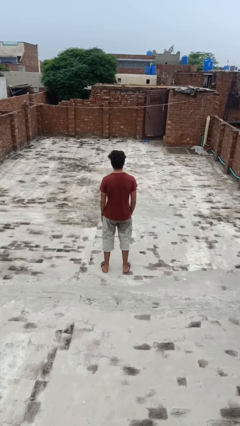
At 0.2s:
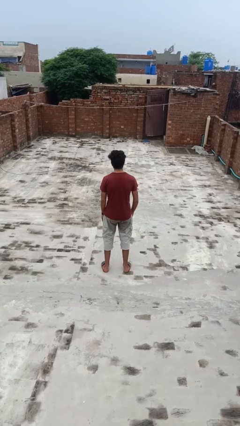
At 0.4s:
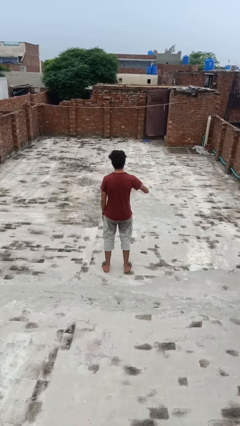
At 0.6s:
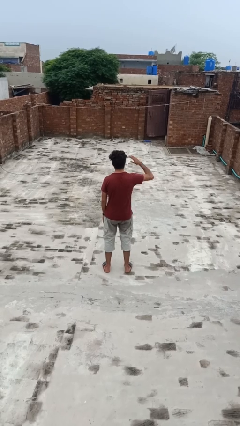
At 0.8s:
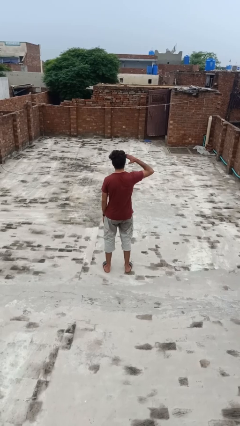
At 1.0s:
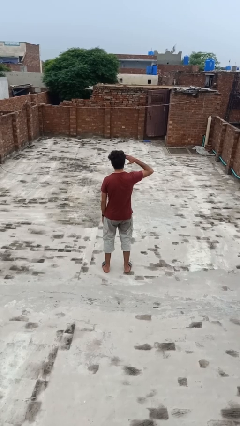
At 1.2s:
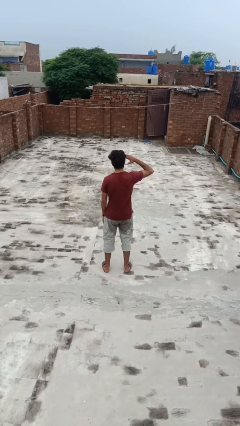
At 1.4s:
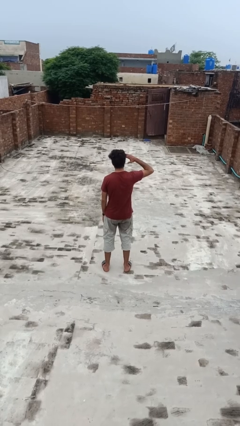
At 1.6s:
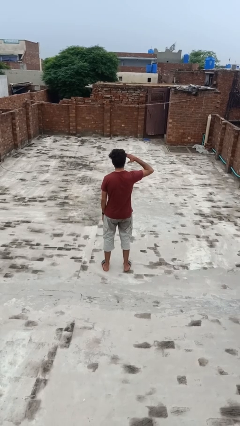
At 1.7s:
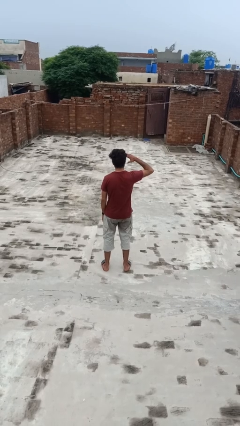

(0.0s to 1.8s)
person salutes

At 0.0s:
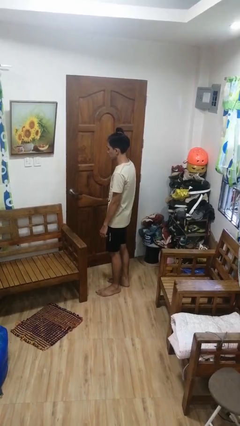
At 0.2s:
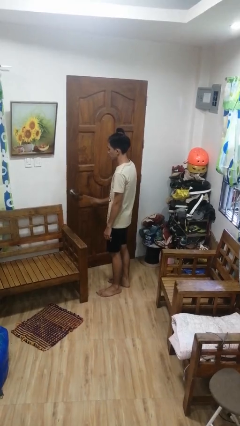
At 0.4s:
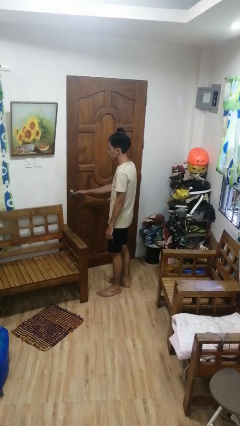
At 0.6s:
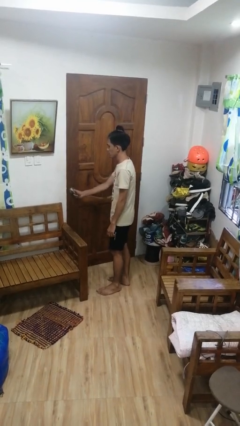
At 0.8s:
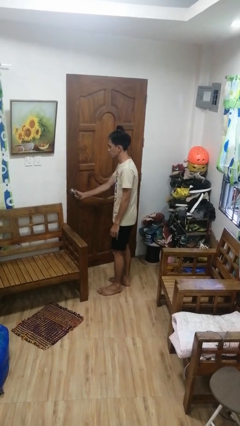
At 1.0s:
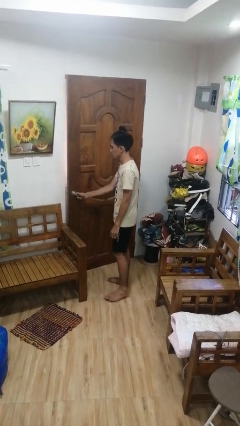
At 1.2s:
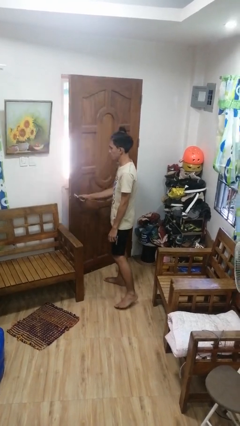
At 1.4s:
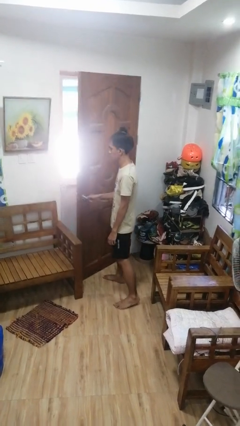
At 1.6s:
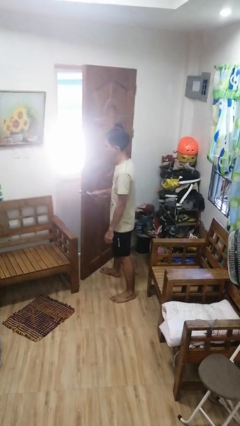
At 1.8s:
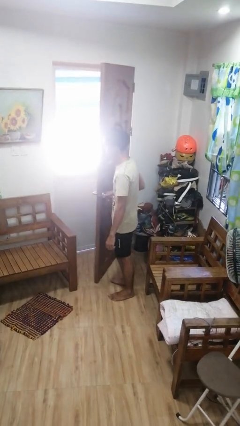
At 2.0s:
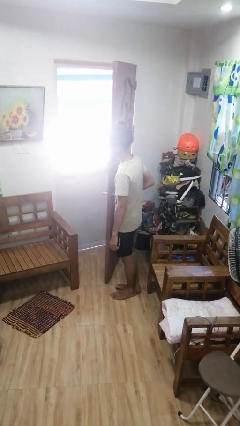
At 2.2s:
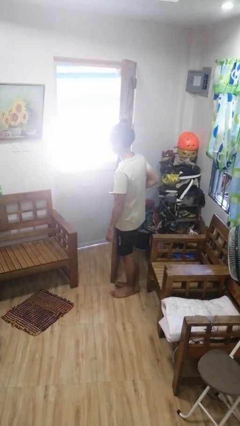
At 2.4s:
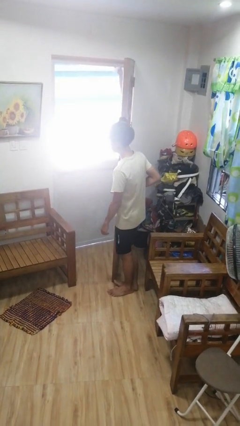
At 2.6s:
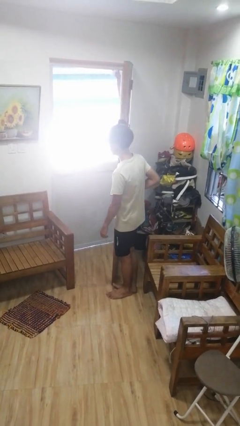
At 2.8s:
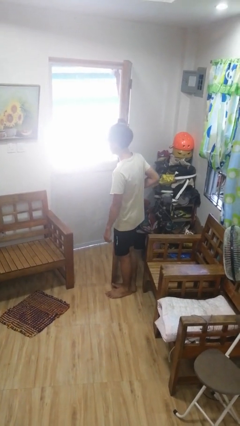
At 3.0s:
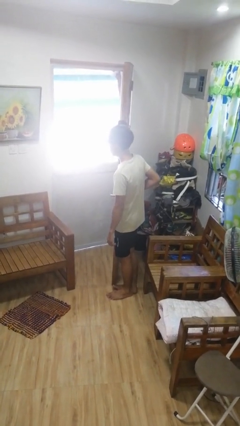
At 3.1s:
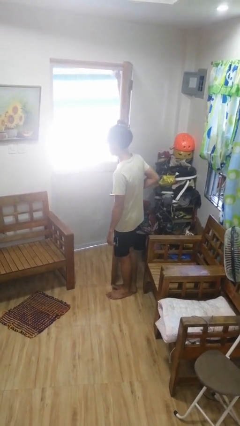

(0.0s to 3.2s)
person opens facility door

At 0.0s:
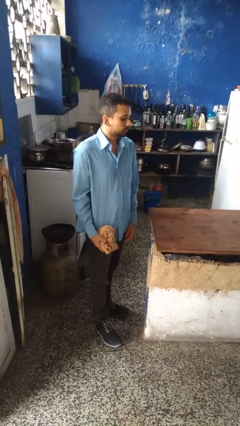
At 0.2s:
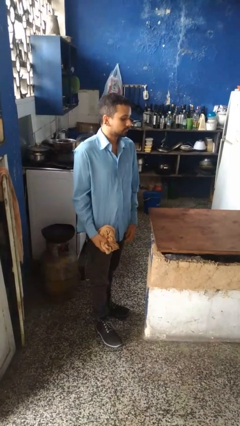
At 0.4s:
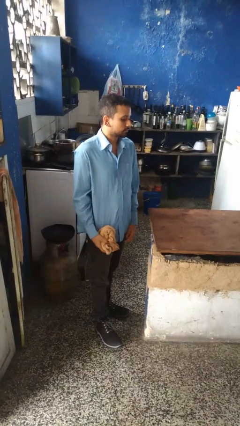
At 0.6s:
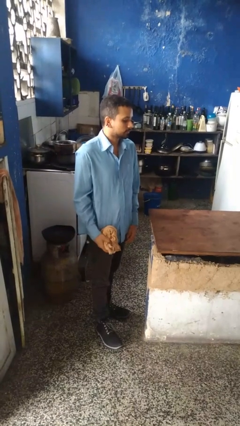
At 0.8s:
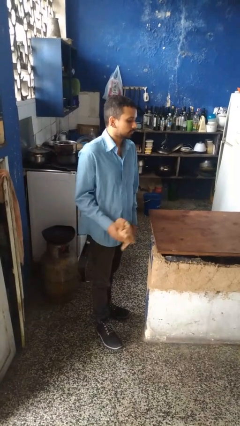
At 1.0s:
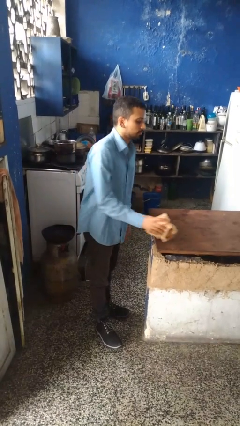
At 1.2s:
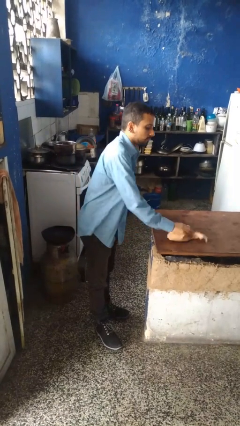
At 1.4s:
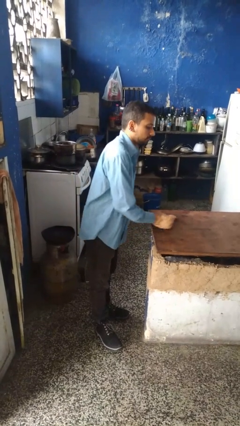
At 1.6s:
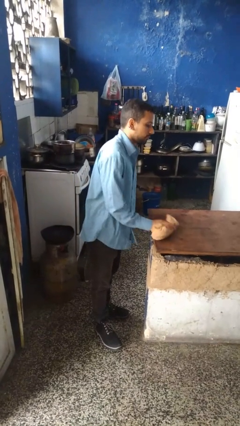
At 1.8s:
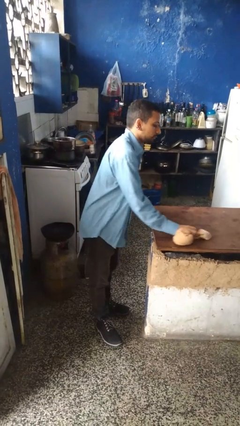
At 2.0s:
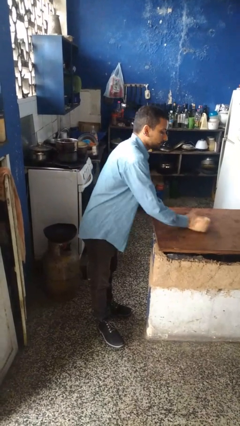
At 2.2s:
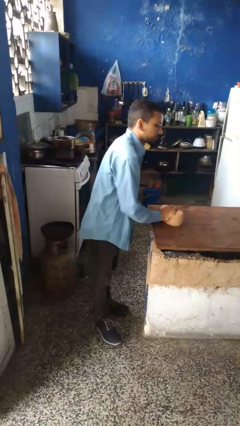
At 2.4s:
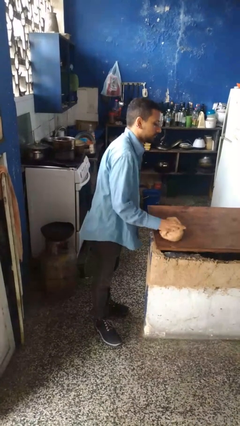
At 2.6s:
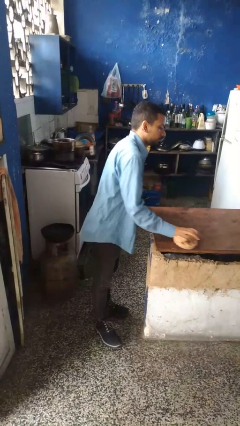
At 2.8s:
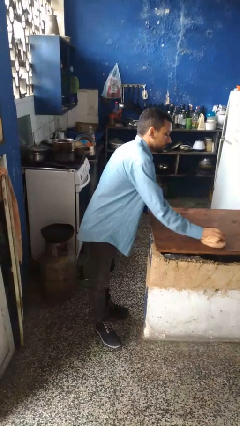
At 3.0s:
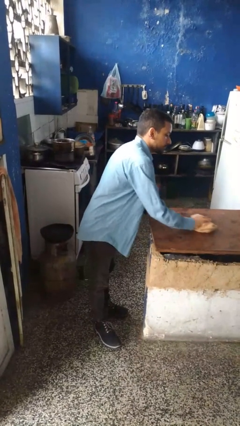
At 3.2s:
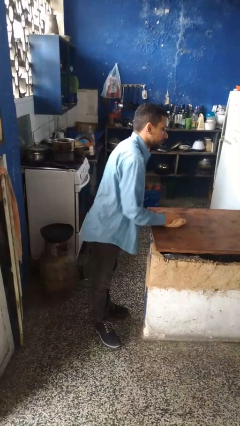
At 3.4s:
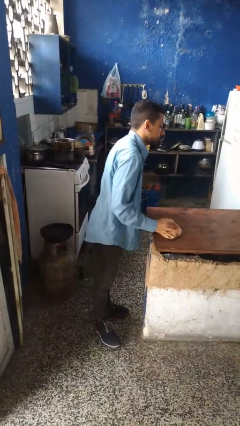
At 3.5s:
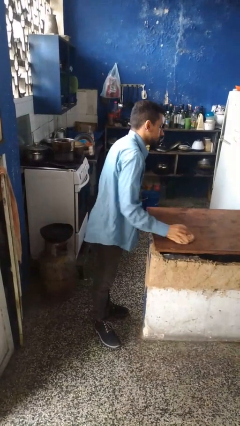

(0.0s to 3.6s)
person cleans table with rag

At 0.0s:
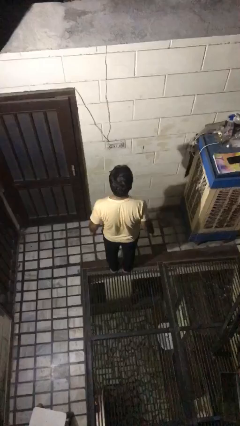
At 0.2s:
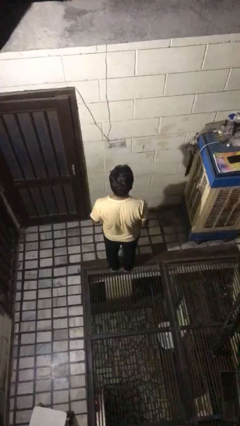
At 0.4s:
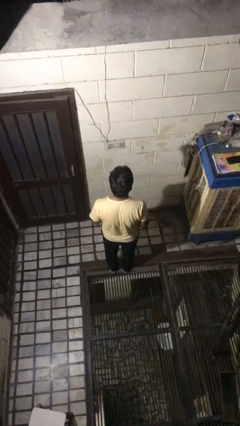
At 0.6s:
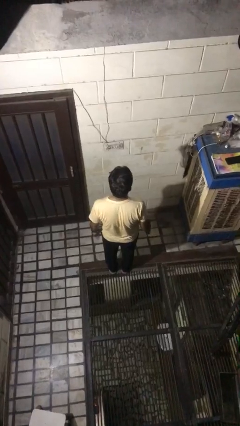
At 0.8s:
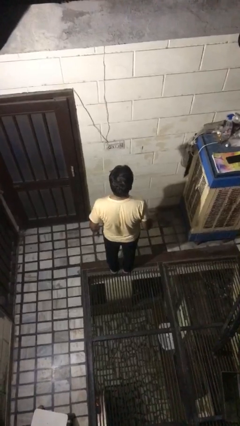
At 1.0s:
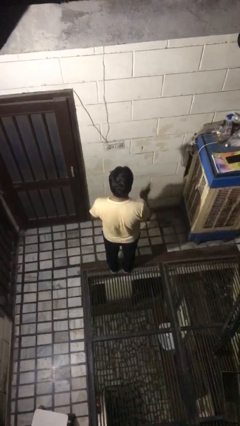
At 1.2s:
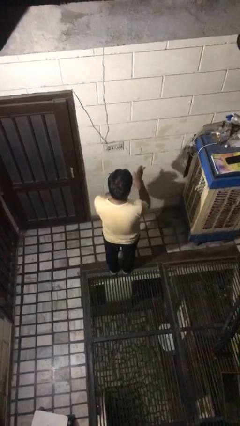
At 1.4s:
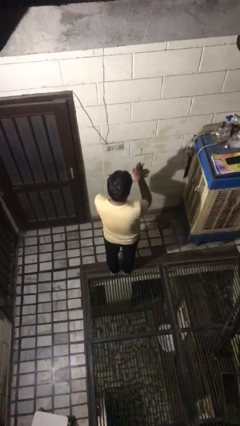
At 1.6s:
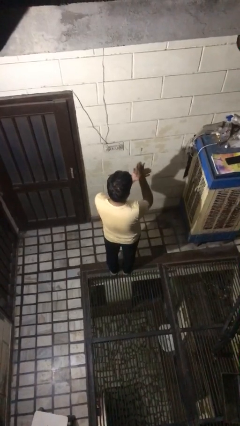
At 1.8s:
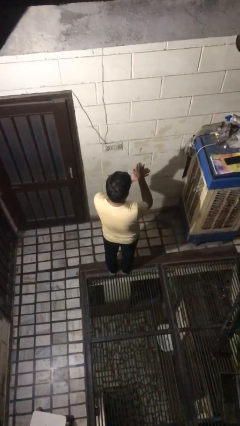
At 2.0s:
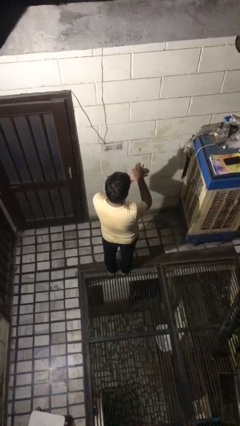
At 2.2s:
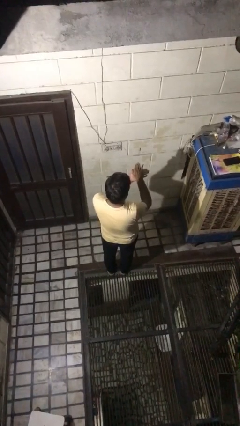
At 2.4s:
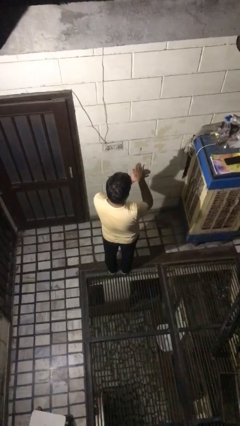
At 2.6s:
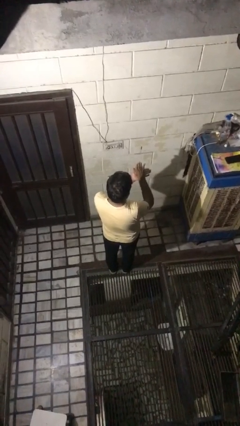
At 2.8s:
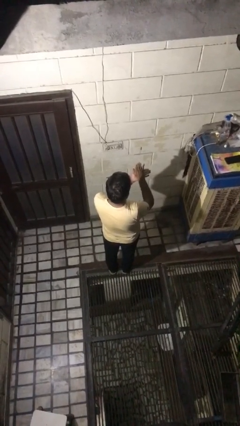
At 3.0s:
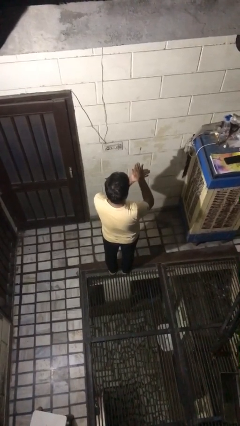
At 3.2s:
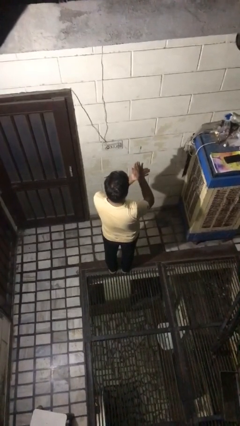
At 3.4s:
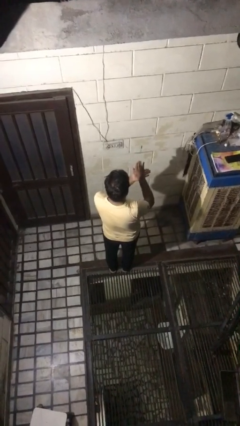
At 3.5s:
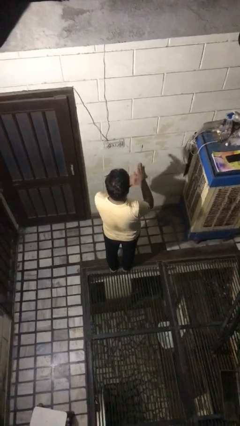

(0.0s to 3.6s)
person gestures number five

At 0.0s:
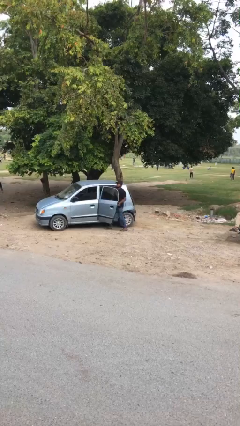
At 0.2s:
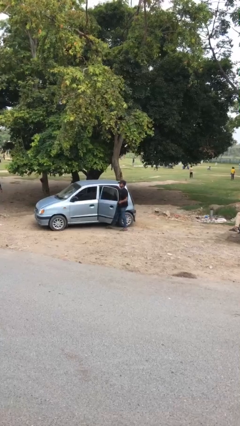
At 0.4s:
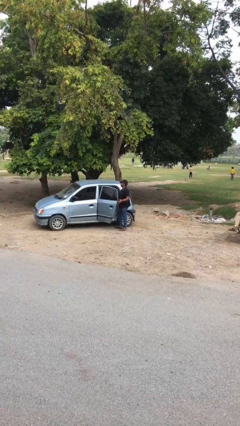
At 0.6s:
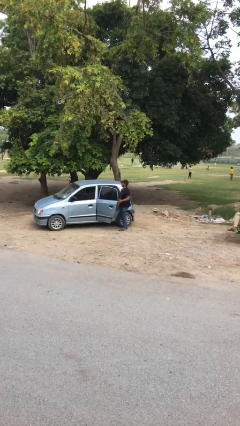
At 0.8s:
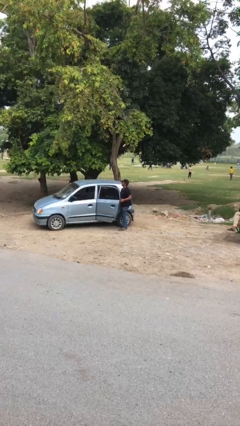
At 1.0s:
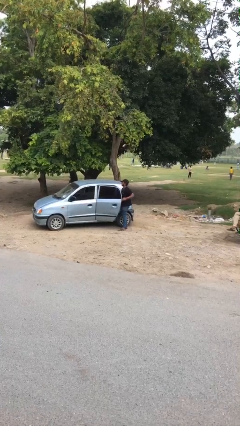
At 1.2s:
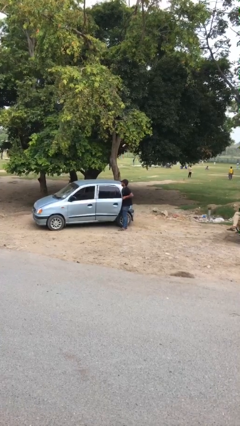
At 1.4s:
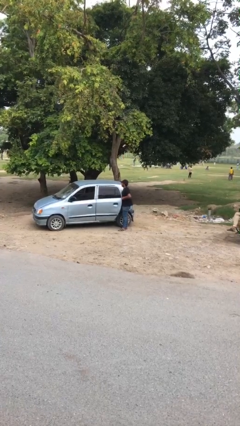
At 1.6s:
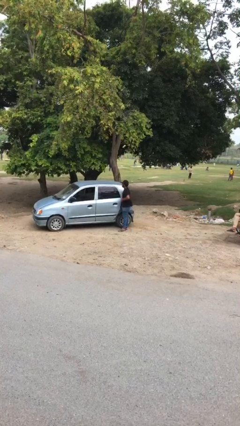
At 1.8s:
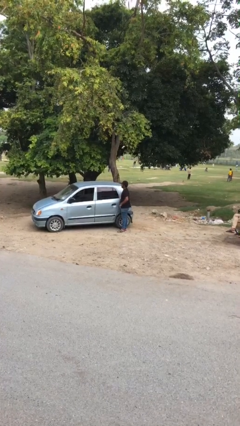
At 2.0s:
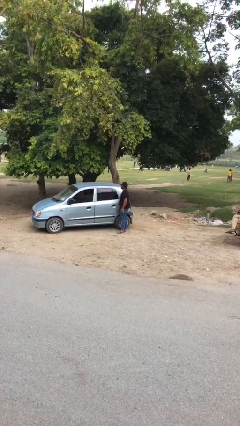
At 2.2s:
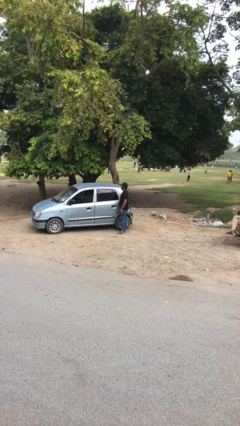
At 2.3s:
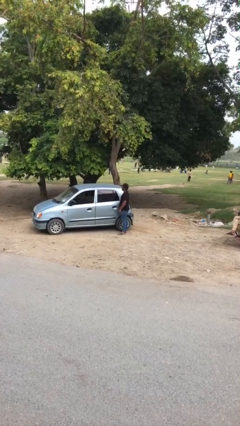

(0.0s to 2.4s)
person closes car door

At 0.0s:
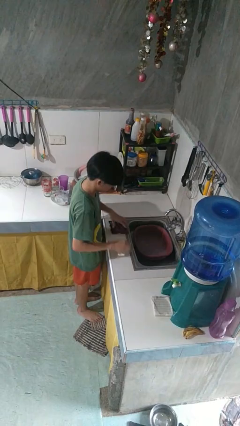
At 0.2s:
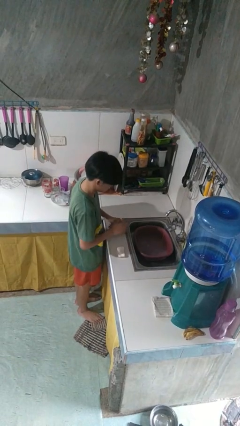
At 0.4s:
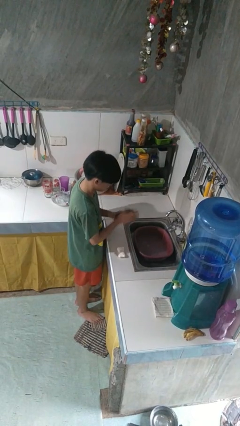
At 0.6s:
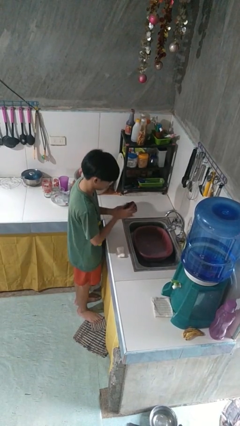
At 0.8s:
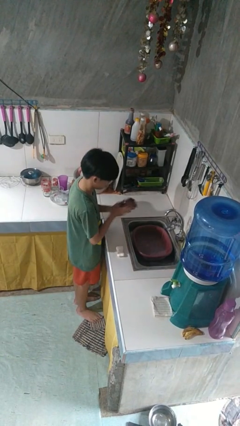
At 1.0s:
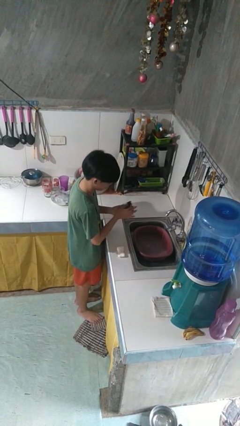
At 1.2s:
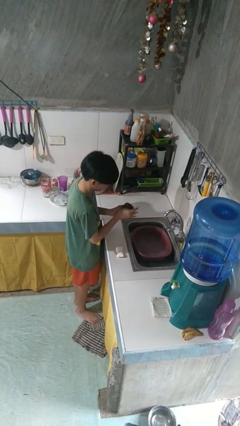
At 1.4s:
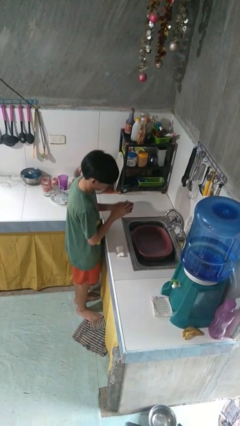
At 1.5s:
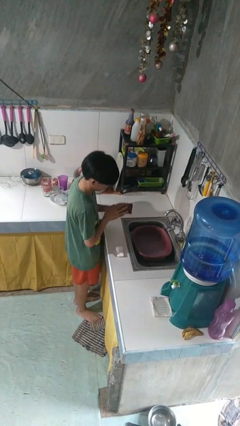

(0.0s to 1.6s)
person dries hands with towel

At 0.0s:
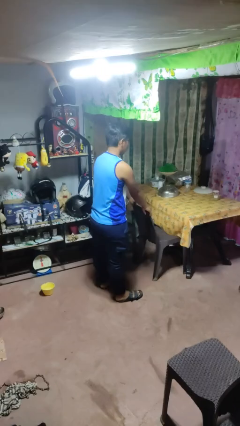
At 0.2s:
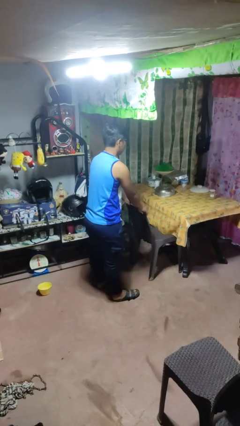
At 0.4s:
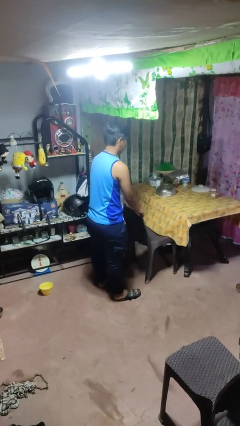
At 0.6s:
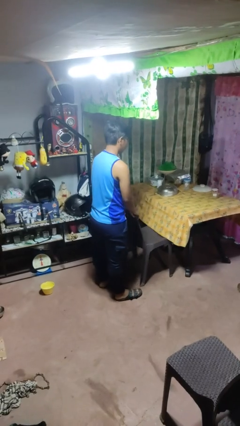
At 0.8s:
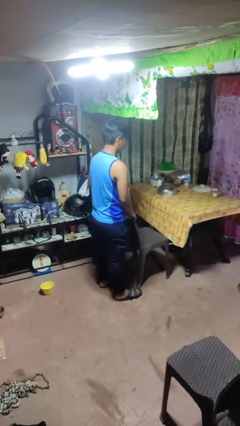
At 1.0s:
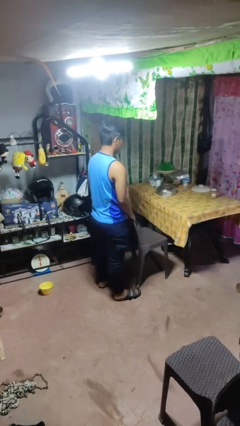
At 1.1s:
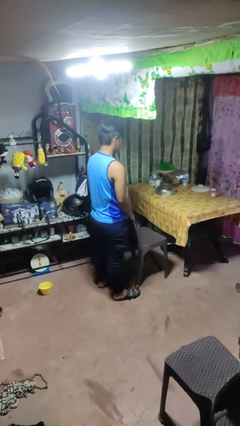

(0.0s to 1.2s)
person pulls out chair
